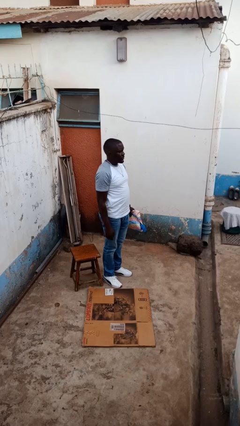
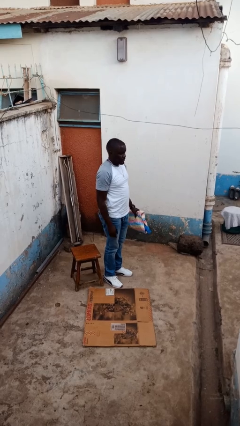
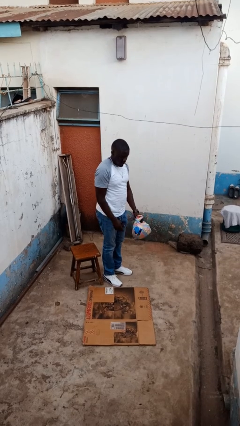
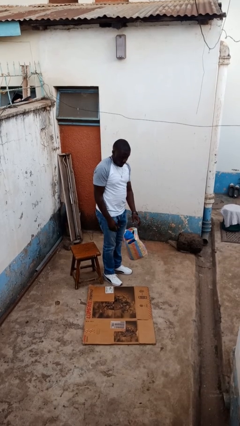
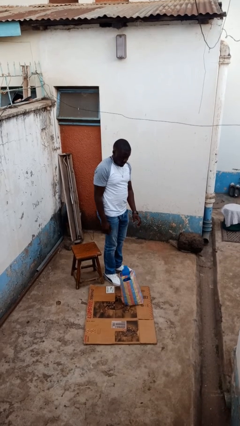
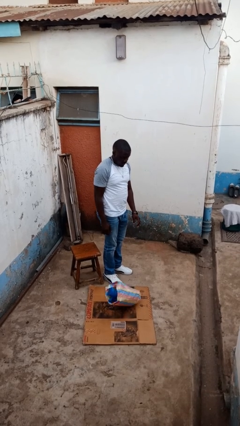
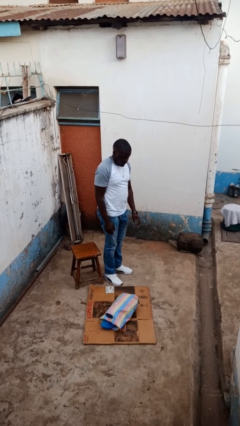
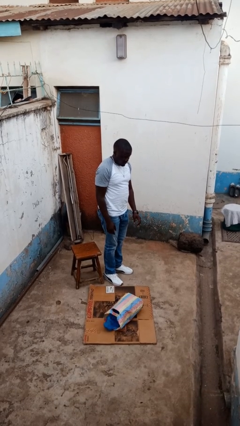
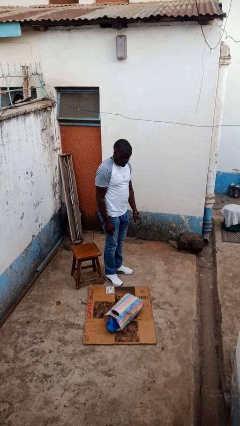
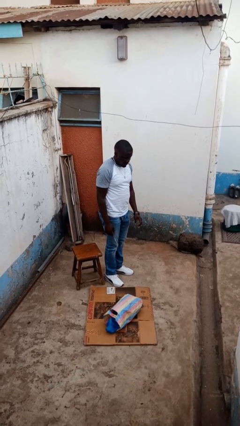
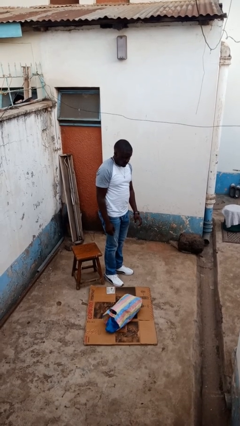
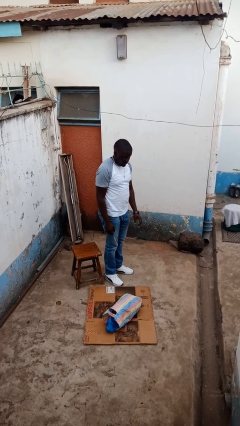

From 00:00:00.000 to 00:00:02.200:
person drops object

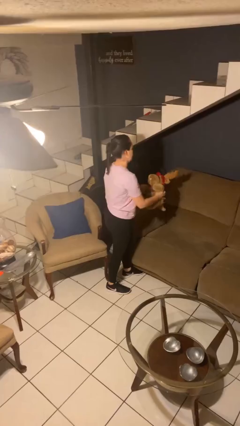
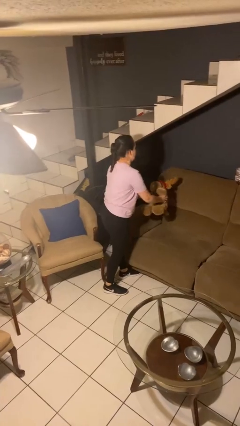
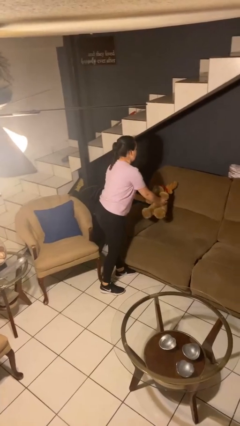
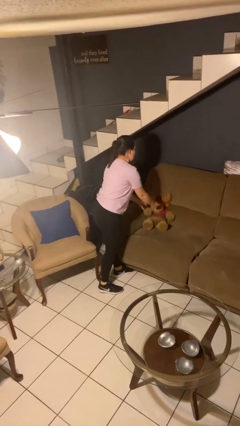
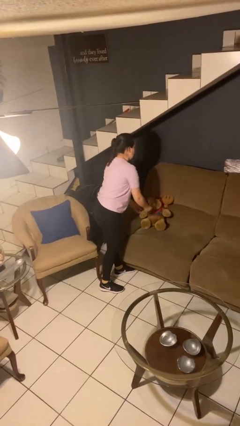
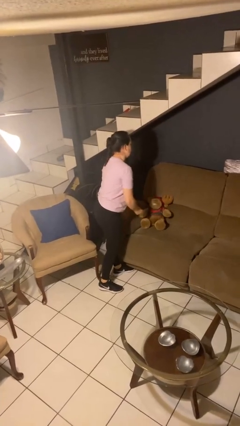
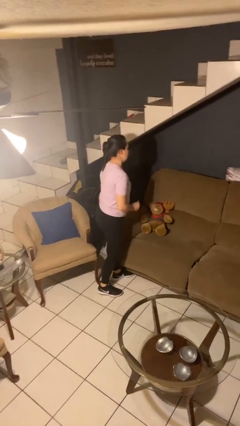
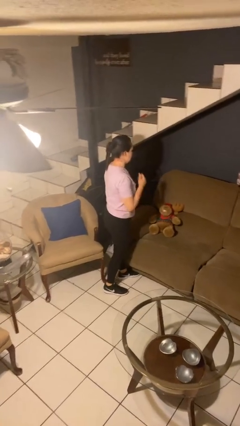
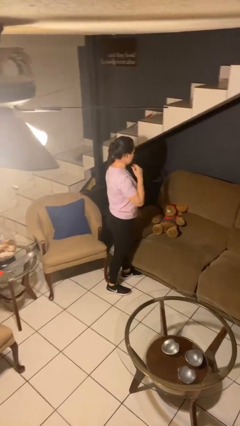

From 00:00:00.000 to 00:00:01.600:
person puts down object on couch

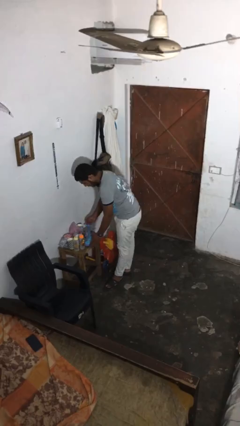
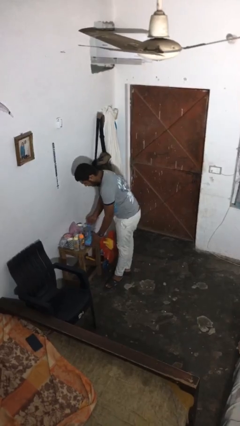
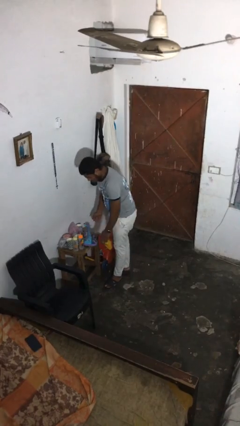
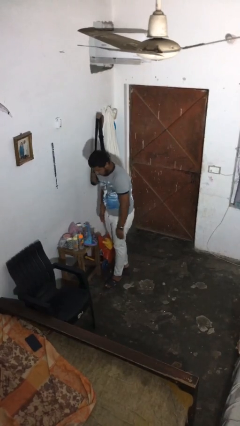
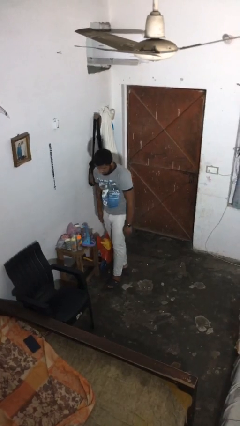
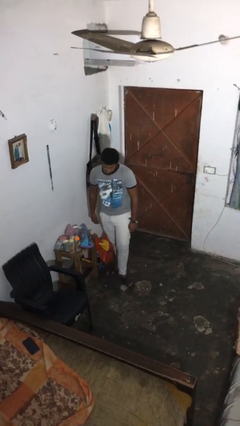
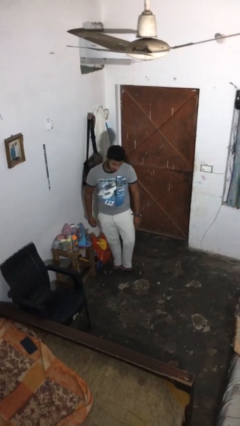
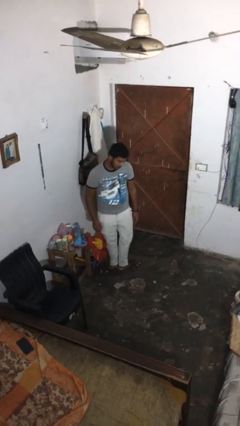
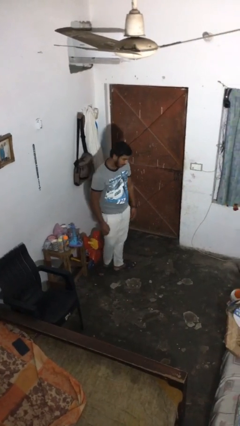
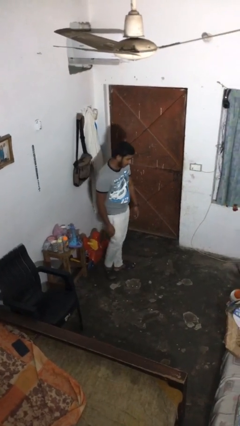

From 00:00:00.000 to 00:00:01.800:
person puts down object on table

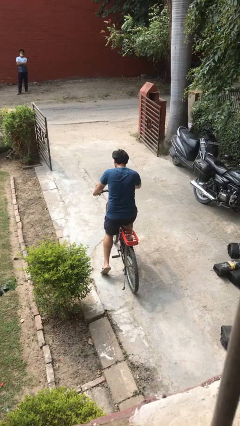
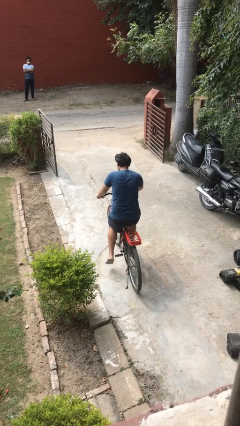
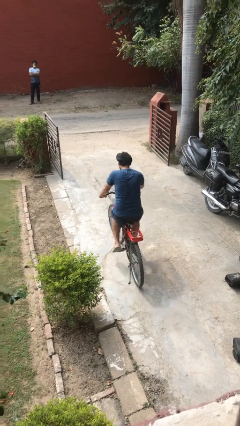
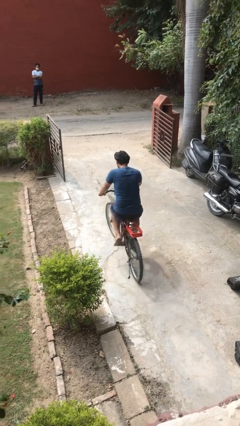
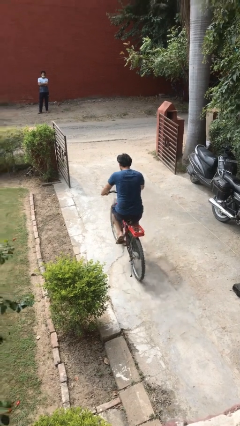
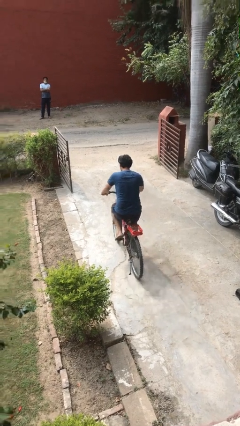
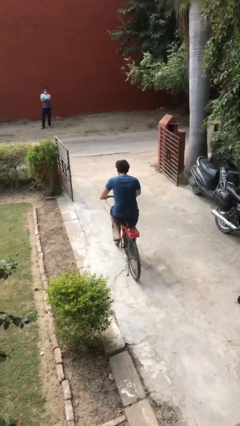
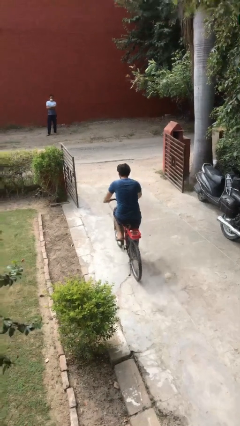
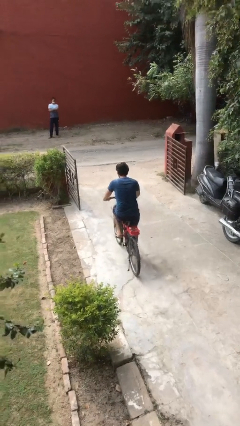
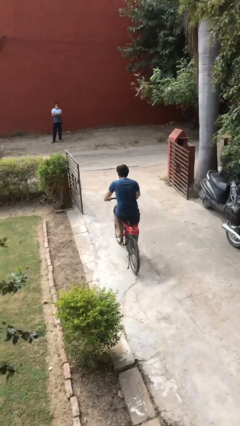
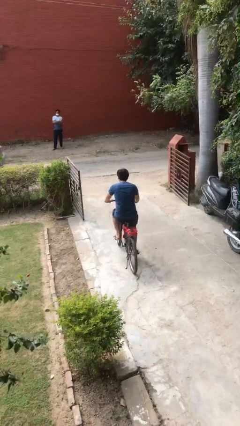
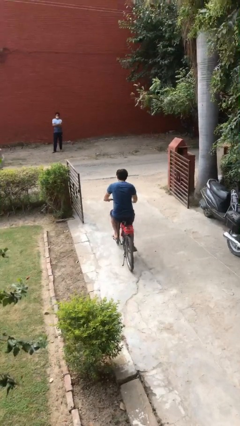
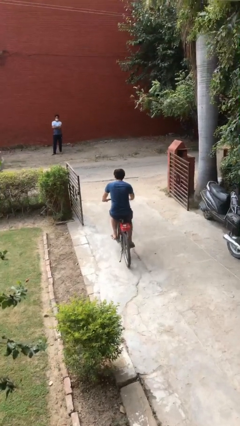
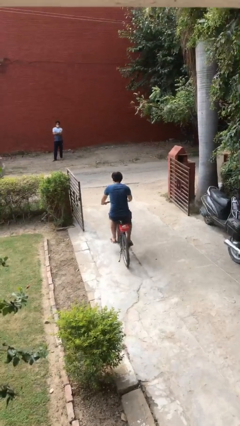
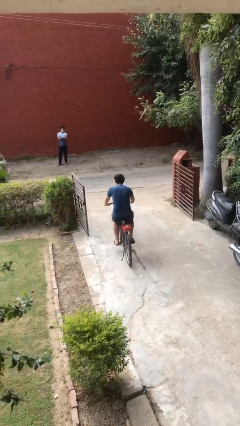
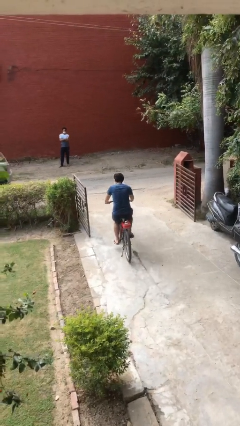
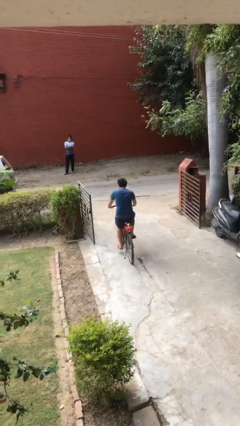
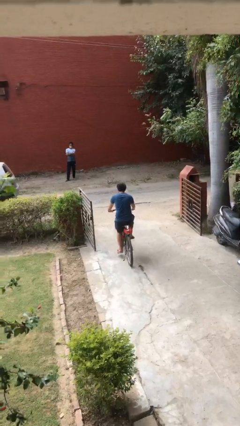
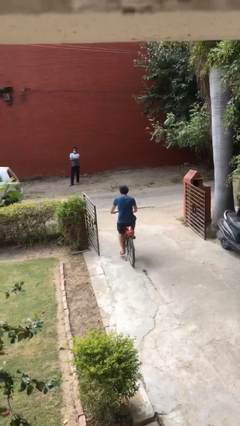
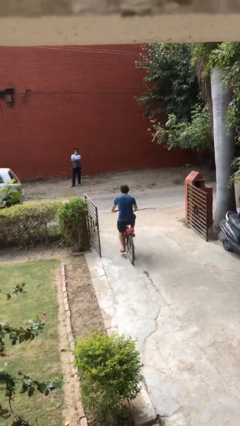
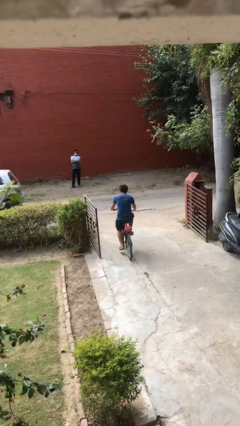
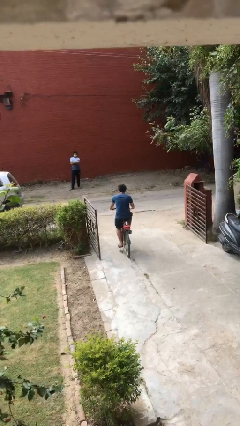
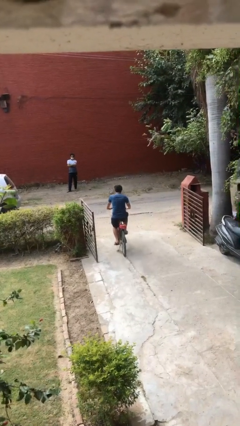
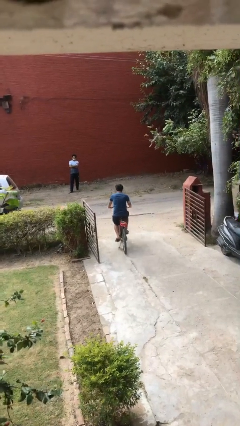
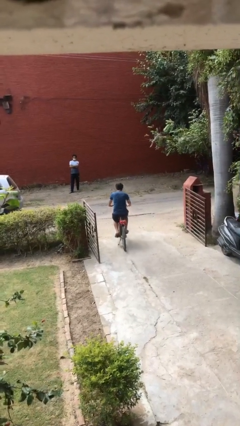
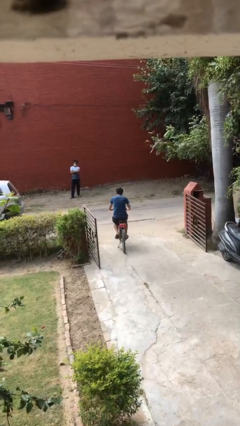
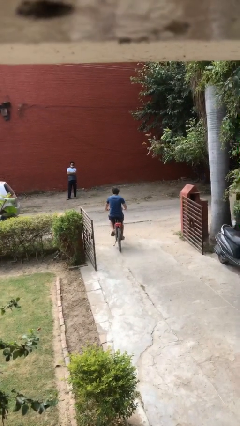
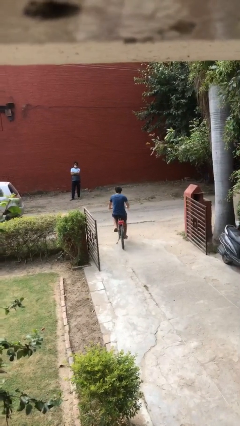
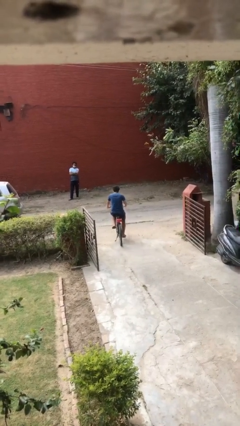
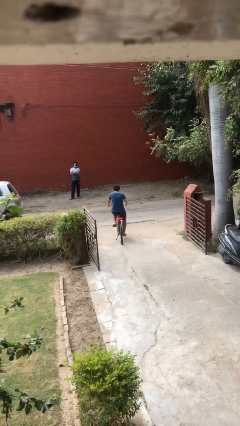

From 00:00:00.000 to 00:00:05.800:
person rides bicycle

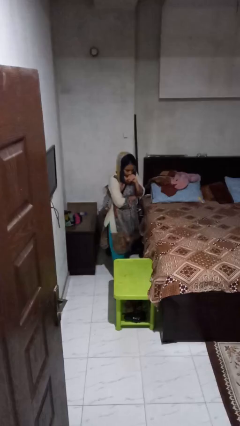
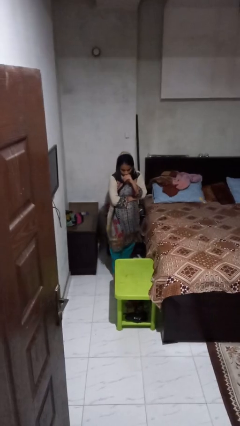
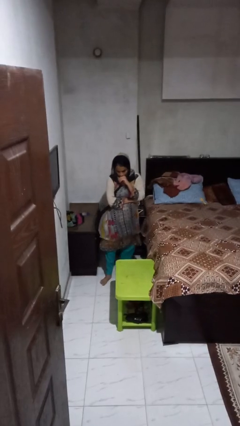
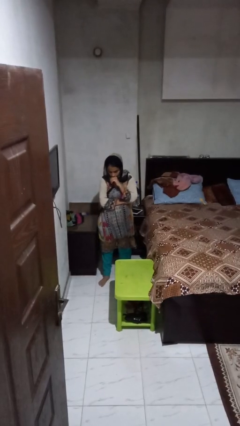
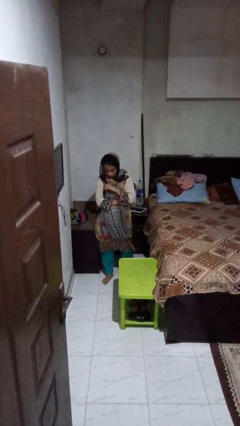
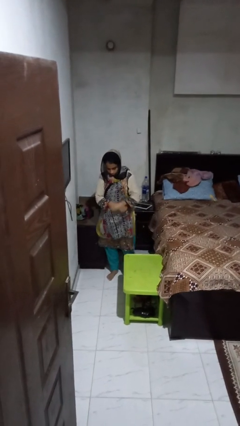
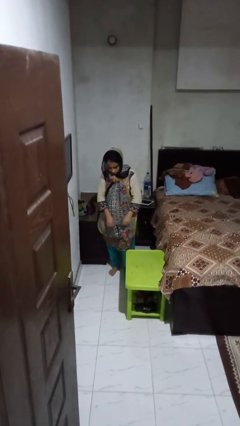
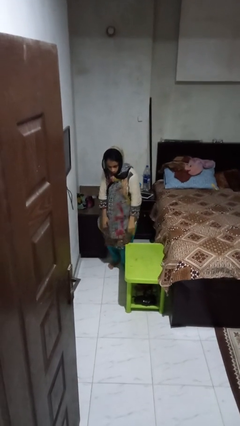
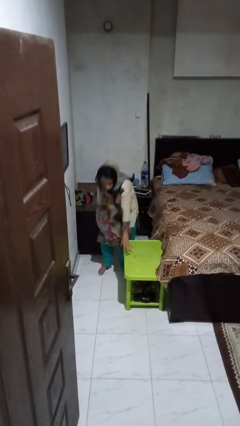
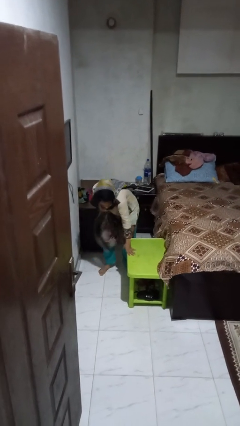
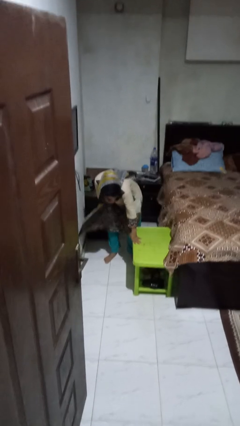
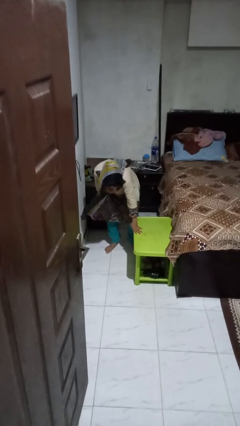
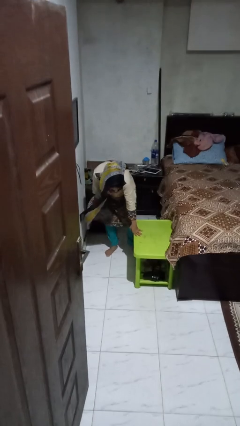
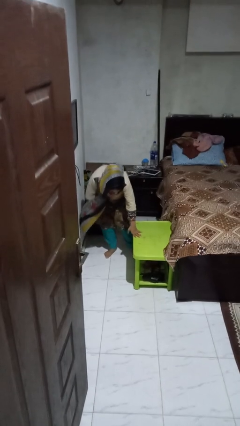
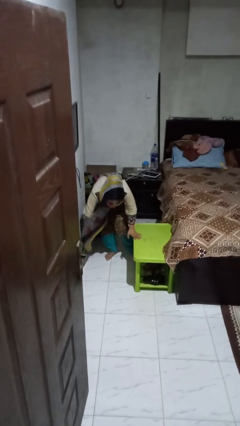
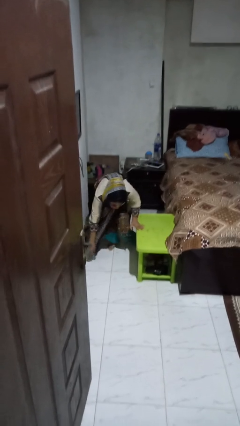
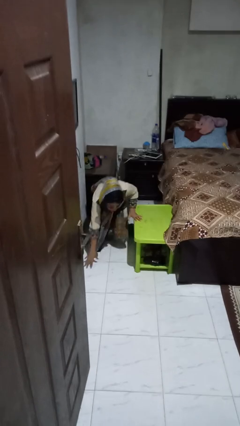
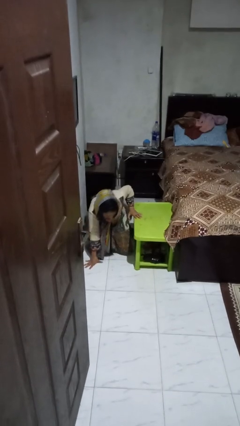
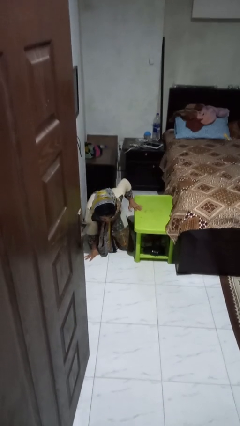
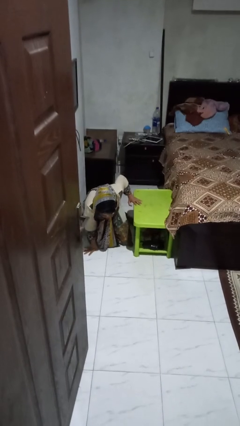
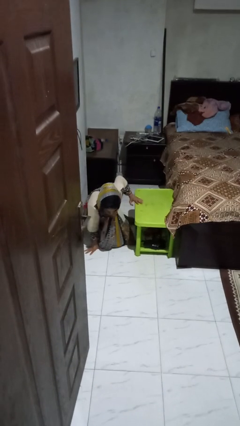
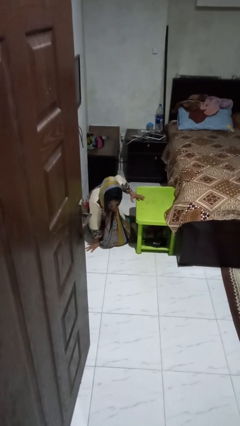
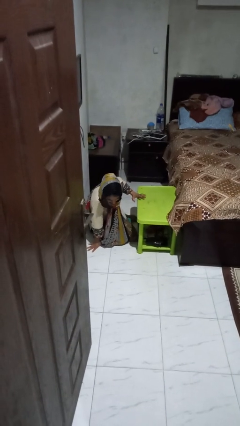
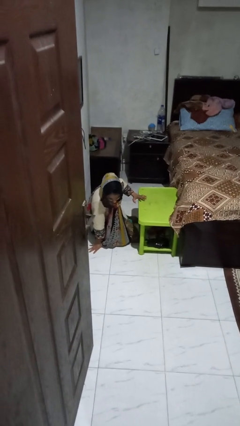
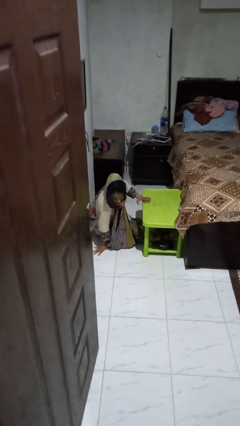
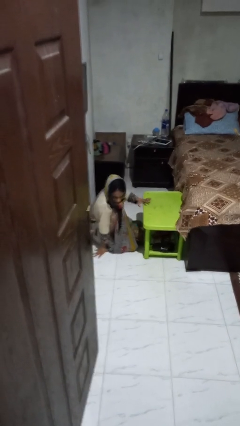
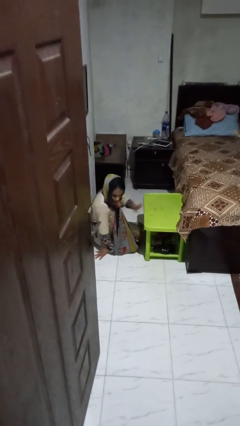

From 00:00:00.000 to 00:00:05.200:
person trips on object on floor

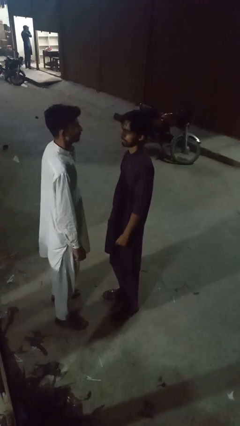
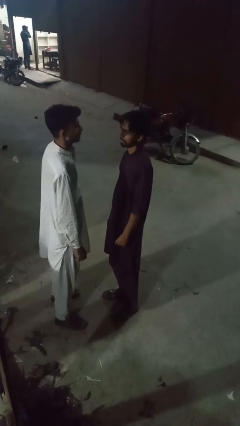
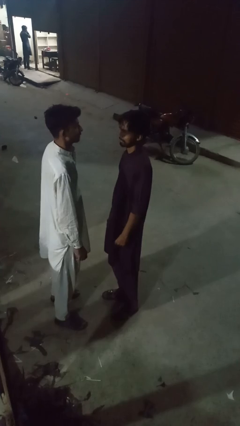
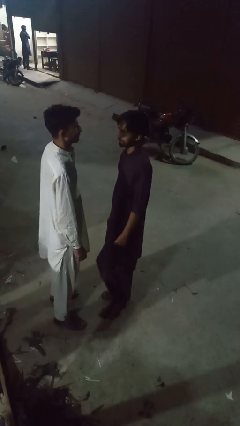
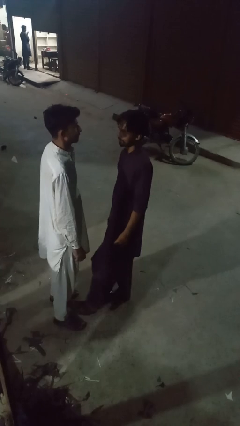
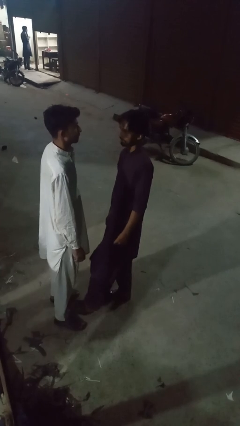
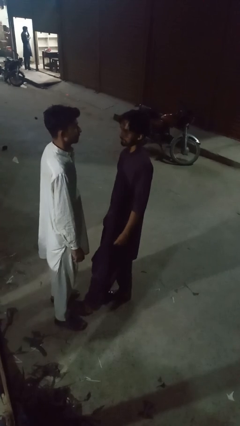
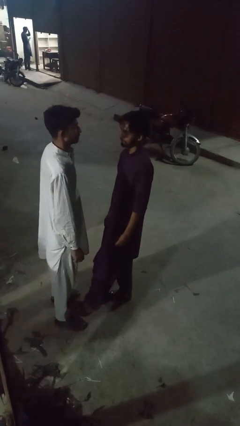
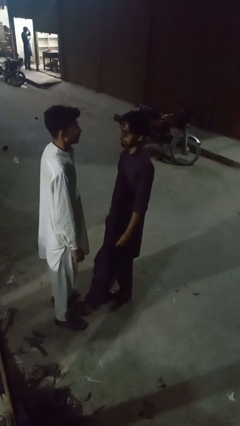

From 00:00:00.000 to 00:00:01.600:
person kicks object to person
